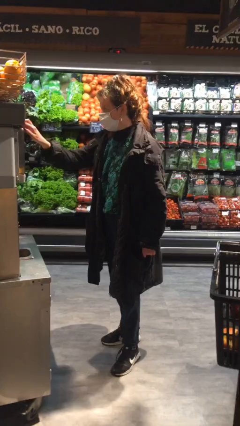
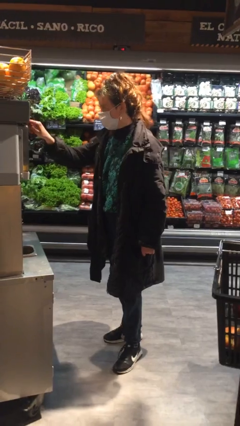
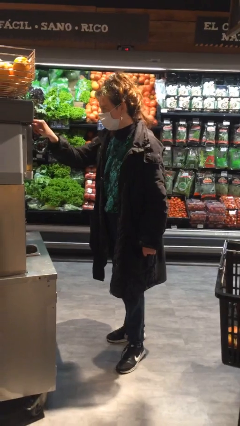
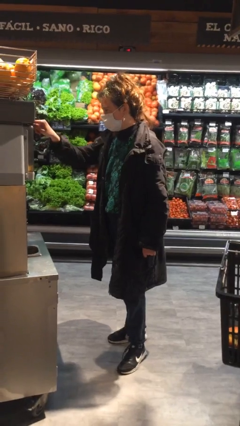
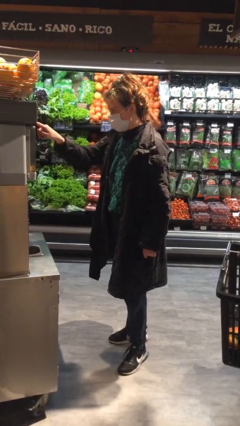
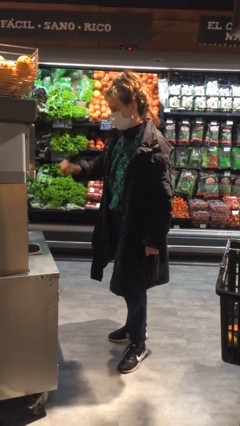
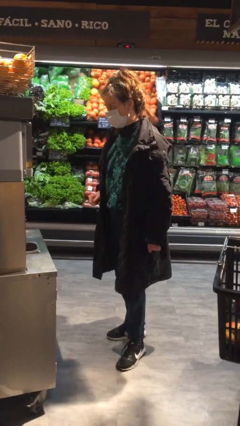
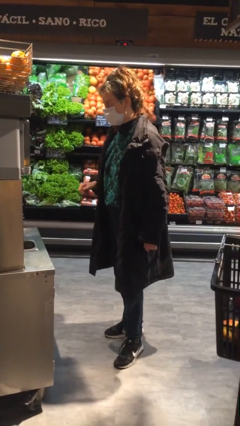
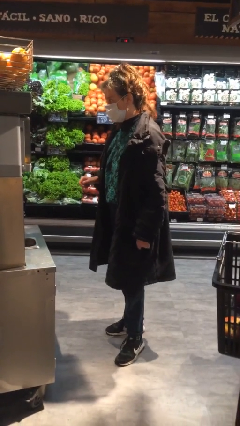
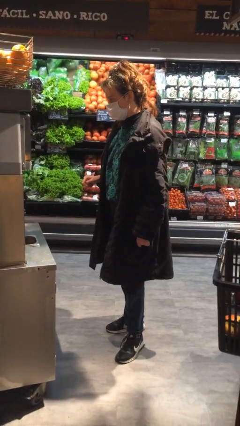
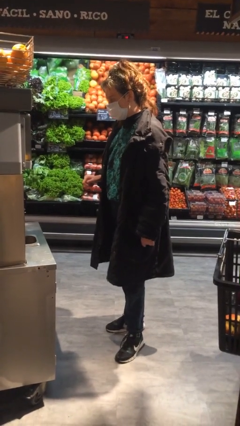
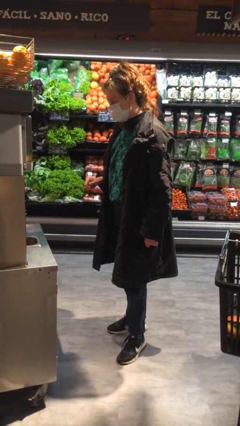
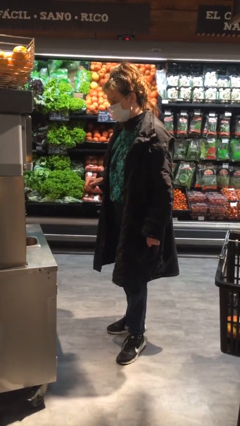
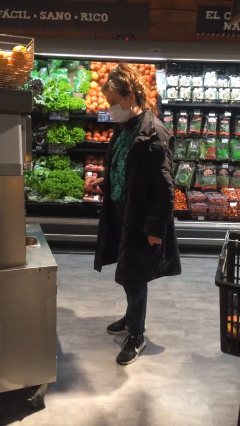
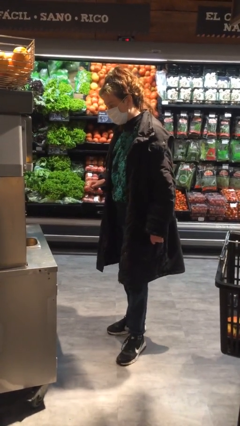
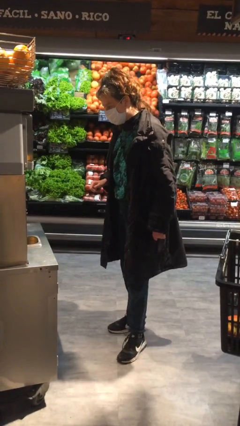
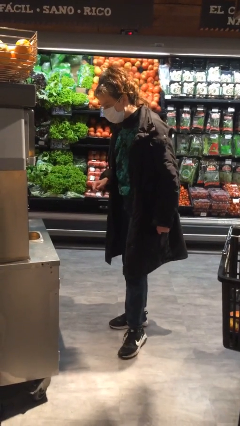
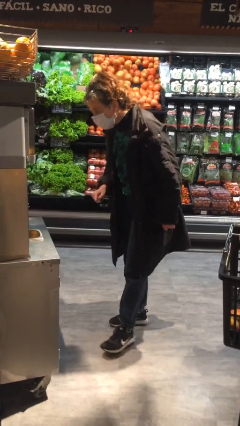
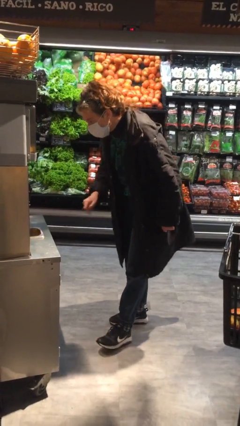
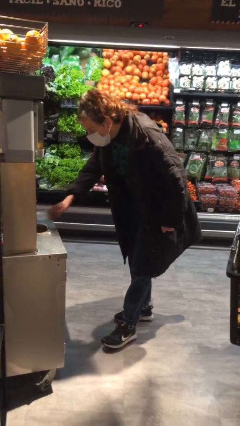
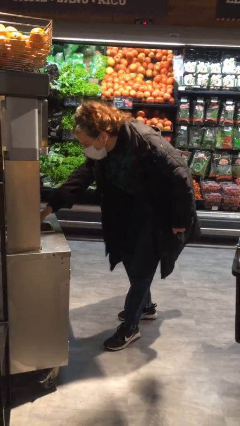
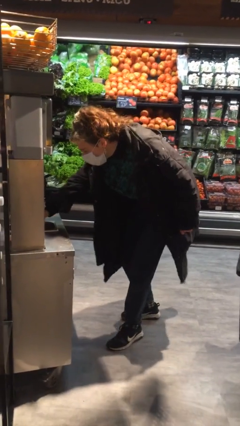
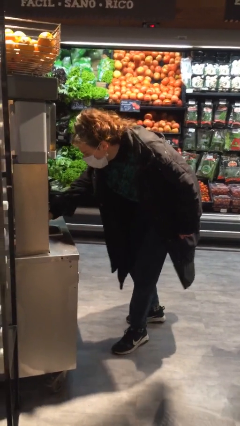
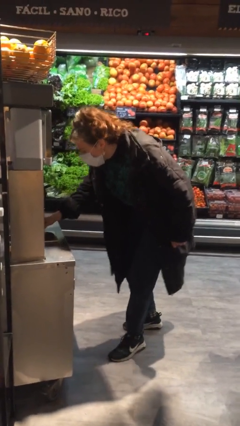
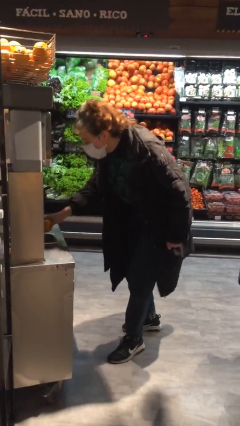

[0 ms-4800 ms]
person purchases from machine

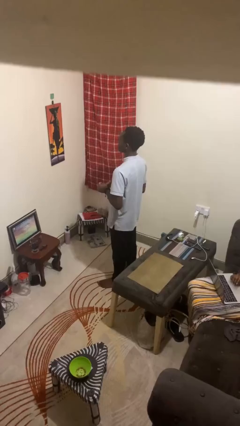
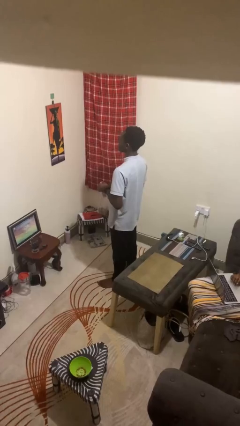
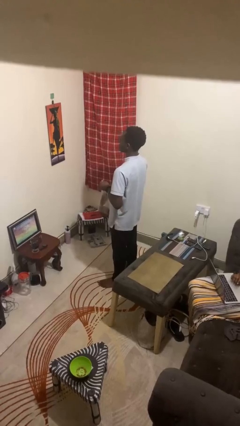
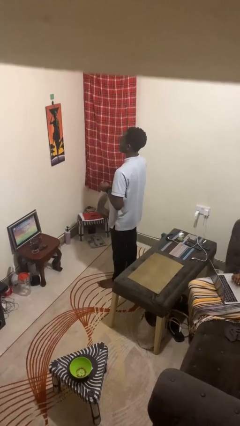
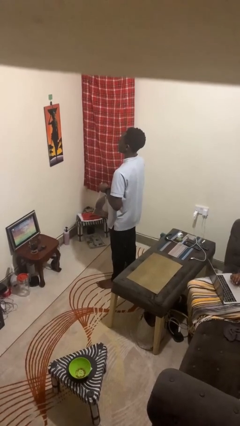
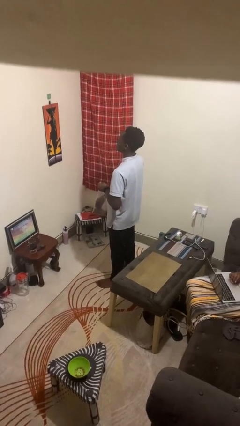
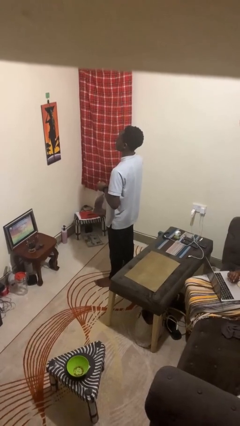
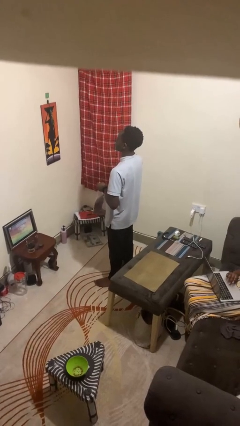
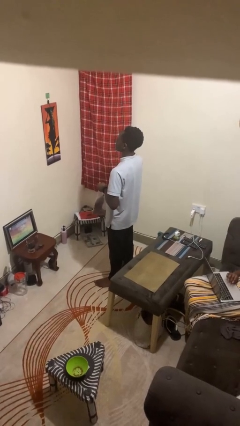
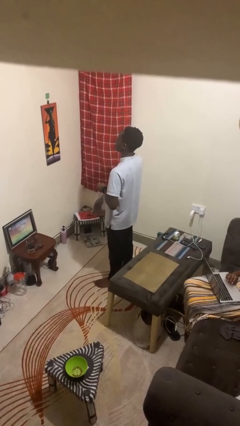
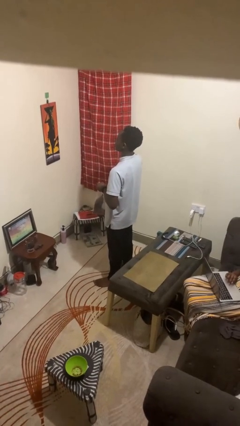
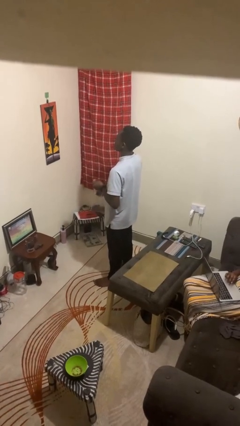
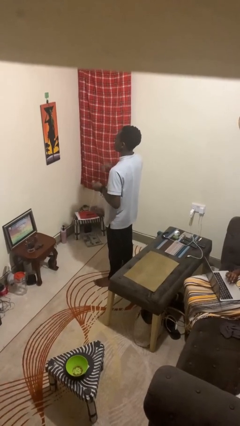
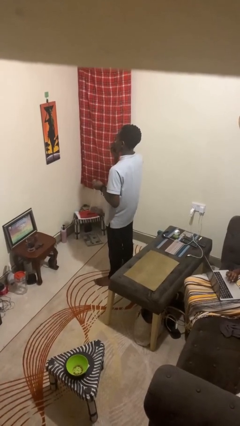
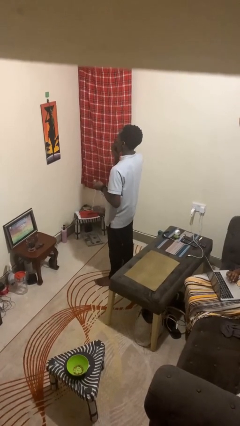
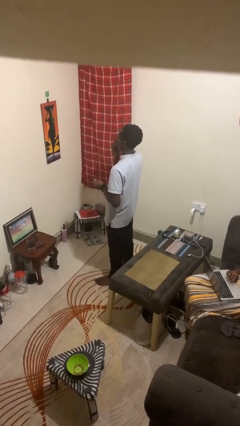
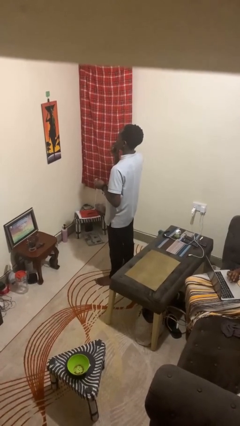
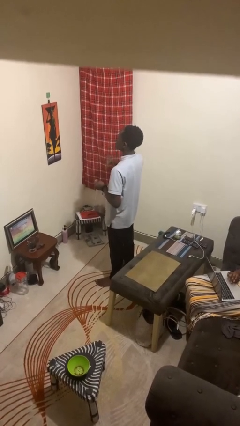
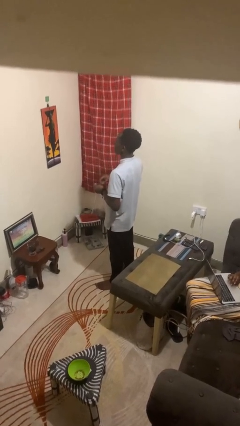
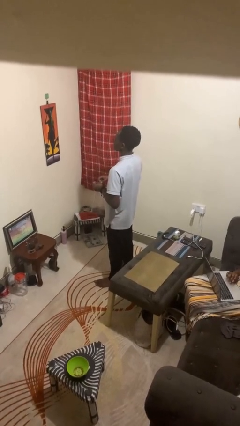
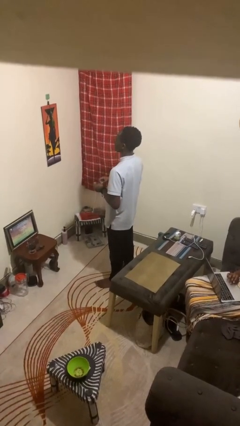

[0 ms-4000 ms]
person eats snack from bag

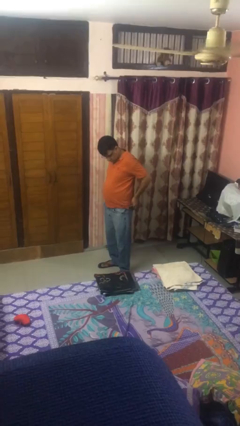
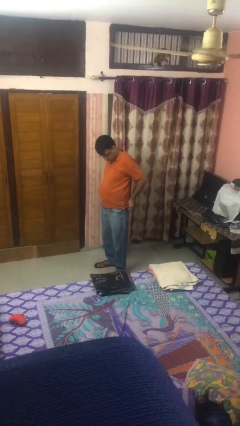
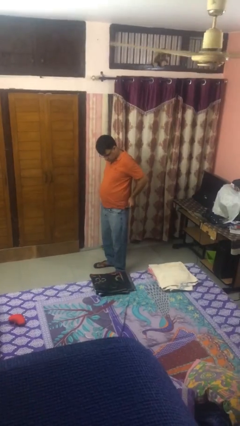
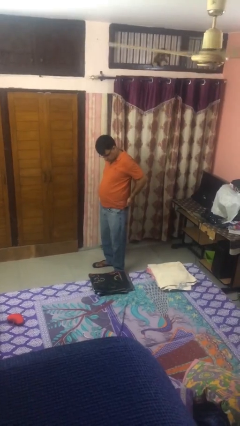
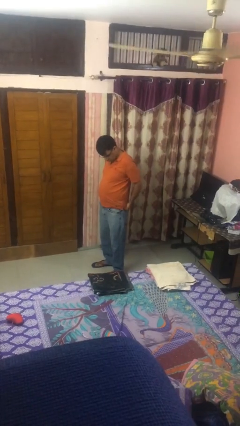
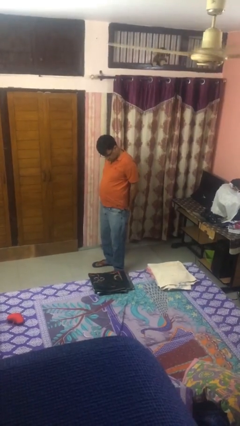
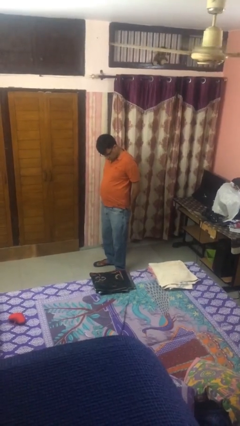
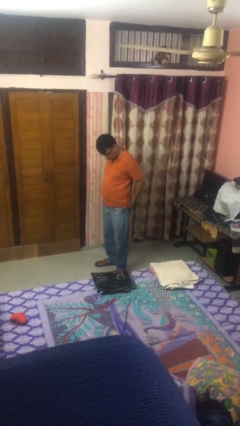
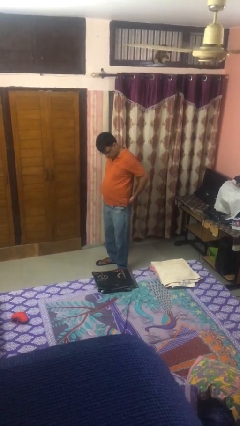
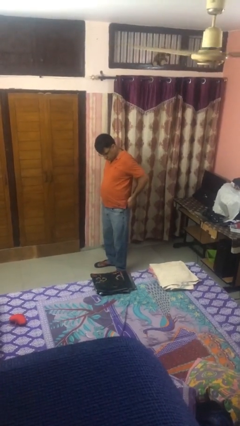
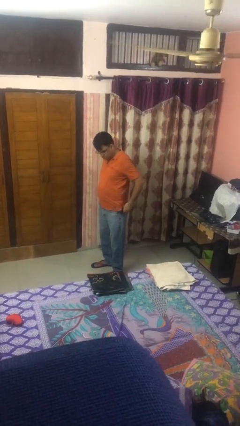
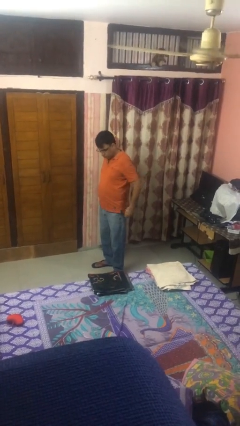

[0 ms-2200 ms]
person puts hands in back pockets

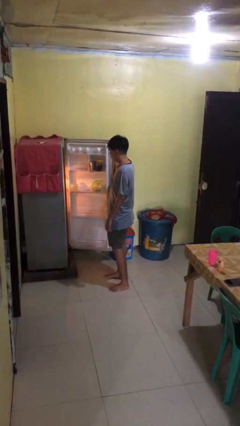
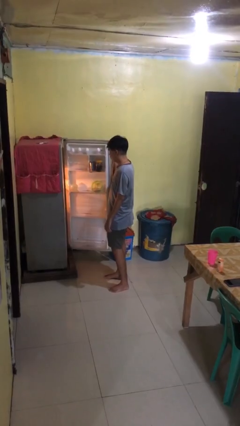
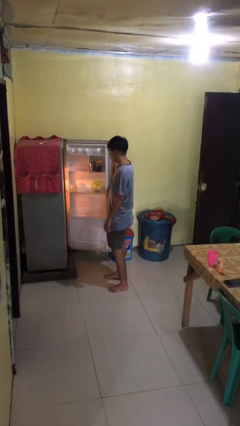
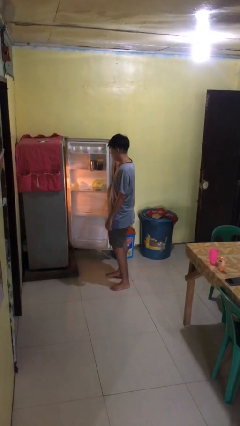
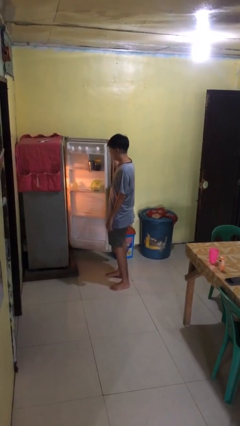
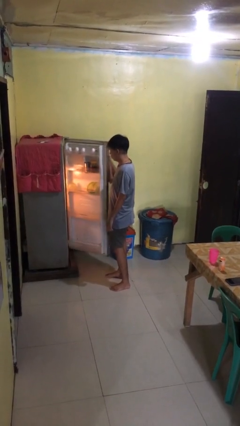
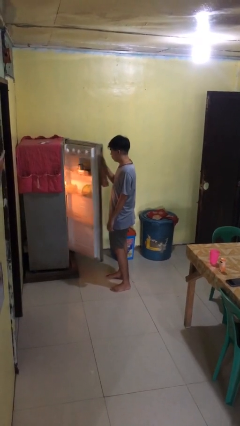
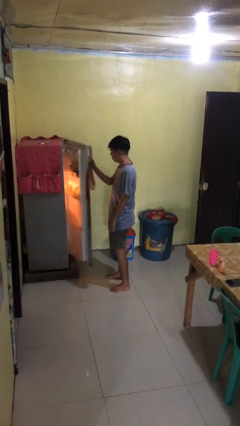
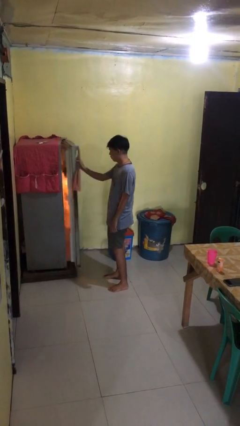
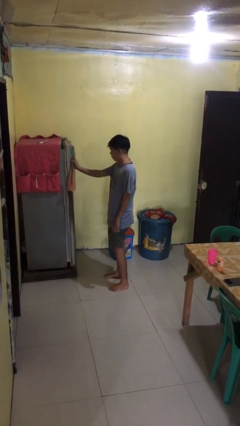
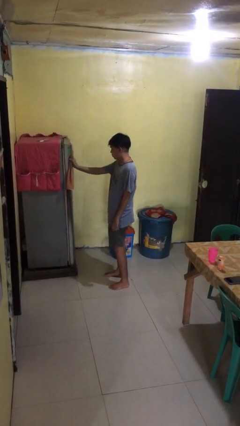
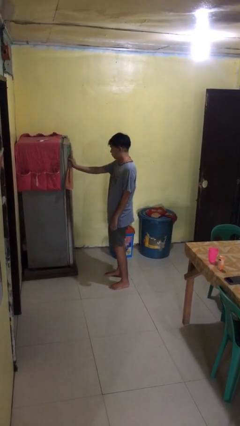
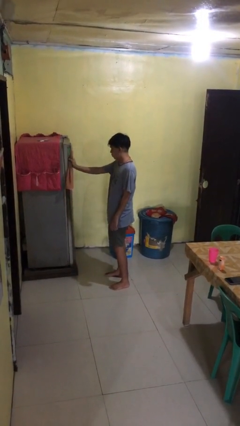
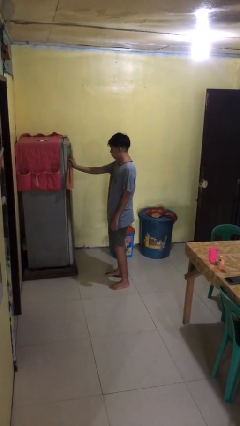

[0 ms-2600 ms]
person closes refrigerator

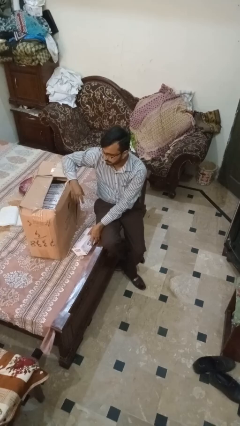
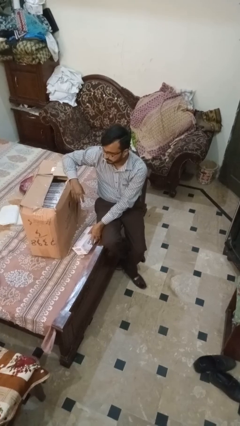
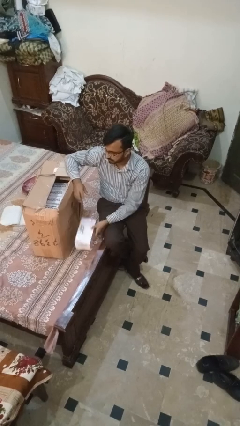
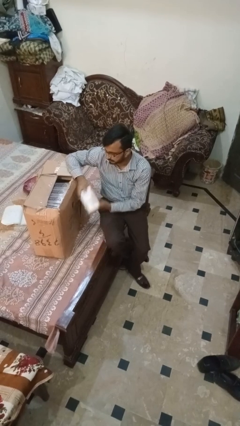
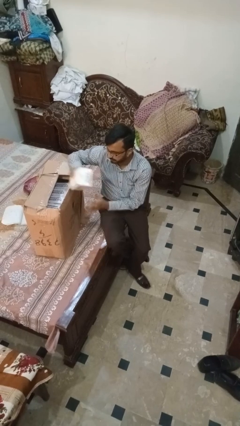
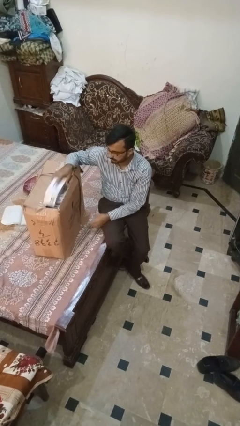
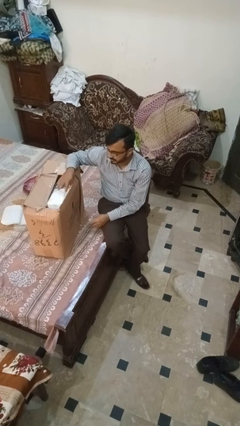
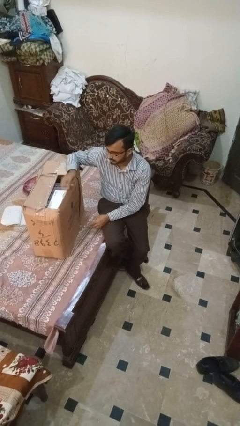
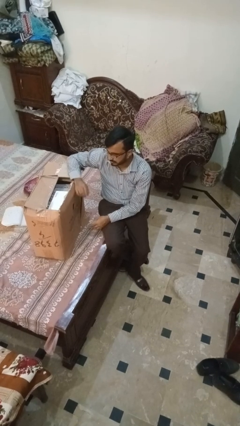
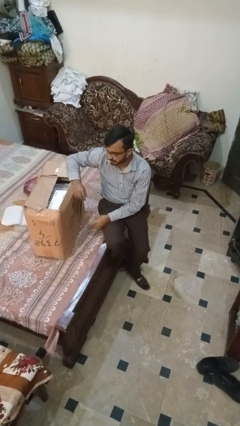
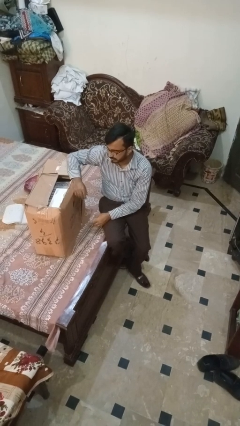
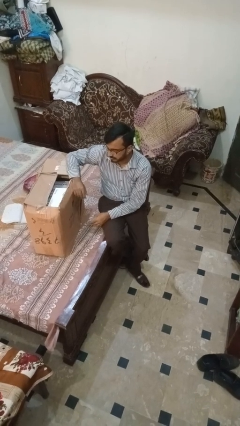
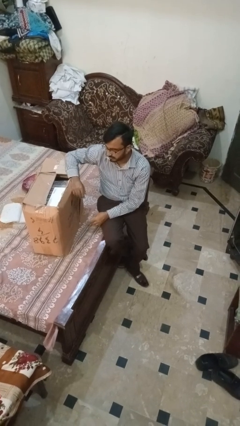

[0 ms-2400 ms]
person puts object into box

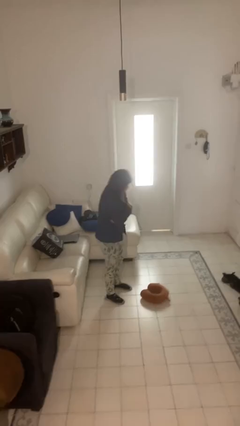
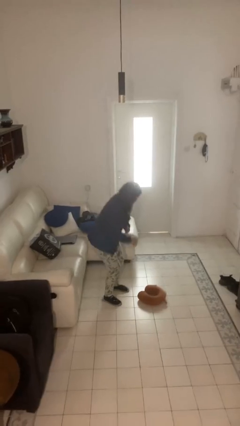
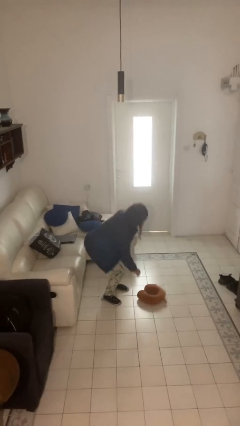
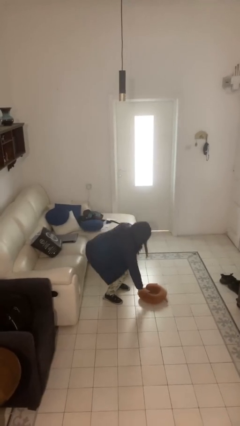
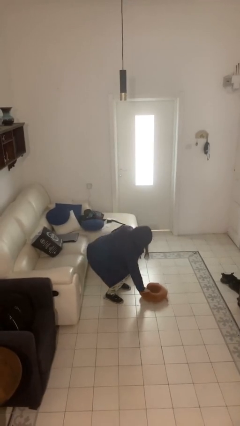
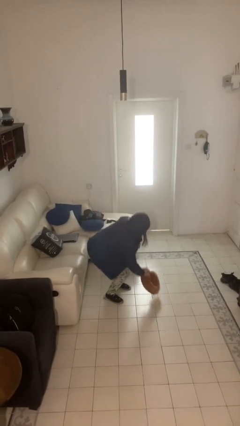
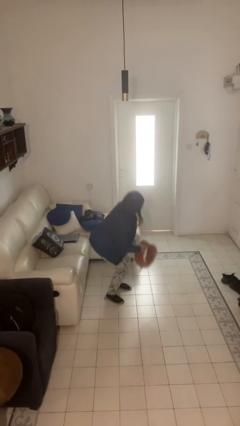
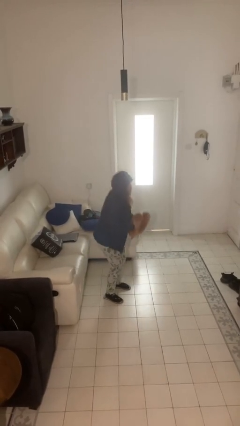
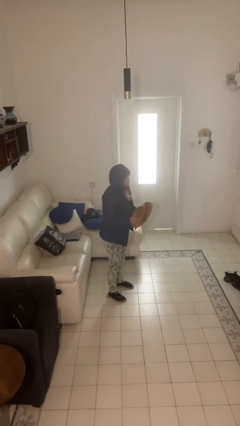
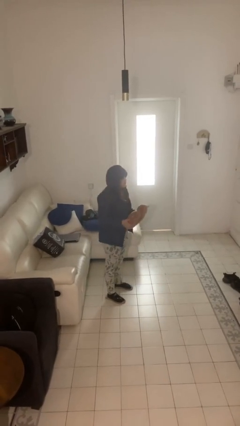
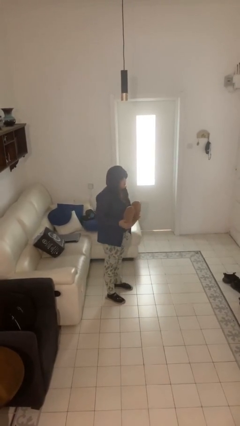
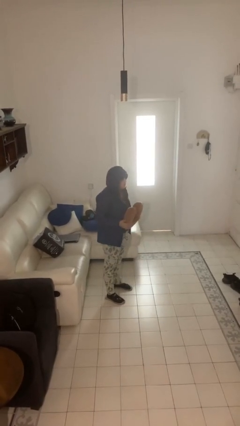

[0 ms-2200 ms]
person picks up object from floor
